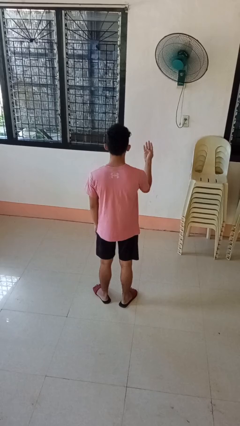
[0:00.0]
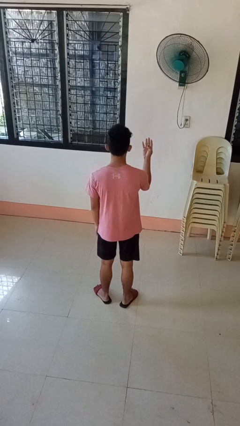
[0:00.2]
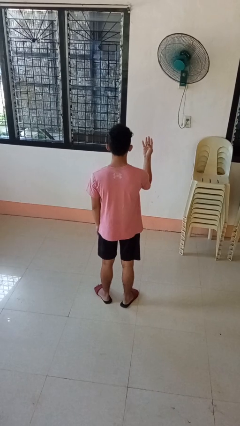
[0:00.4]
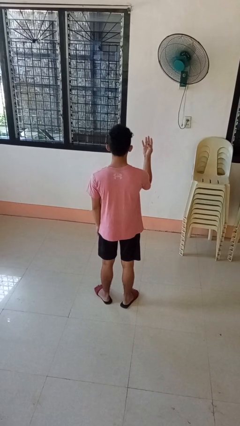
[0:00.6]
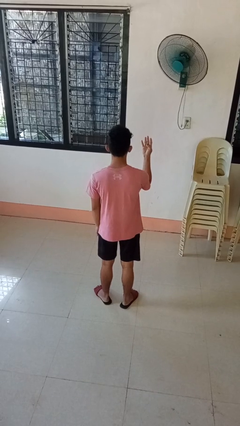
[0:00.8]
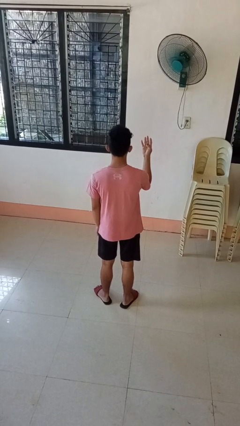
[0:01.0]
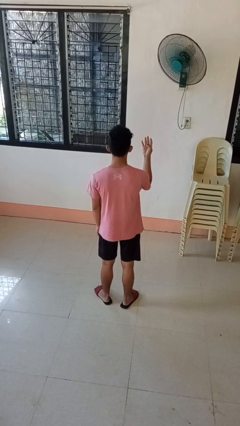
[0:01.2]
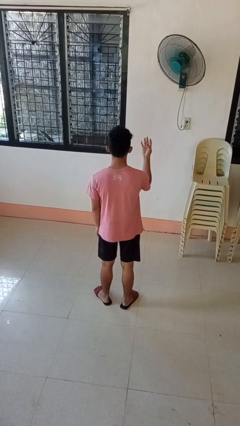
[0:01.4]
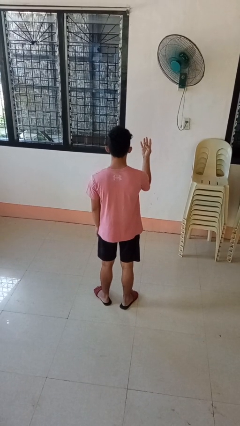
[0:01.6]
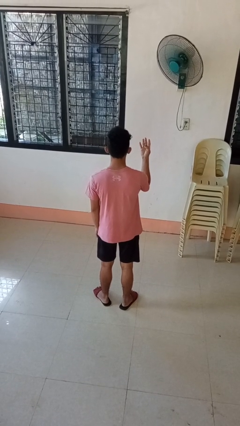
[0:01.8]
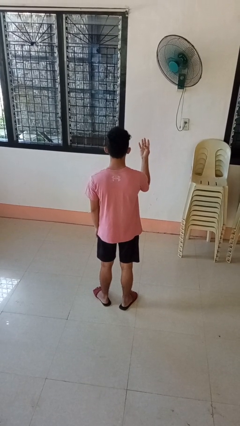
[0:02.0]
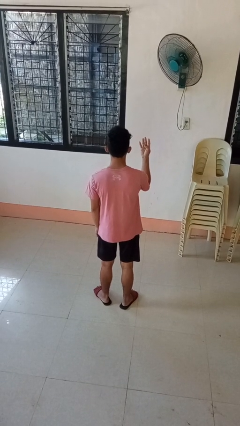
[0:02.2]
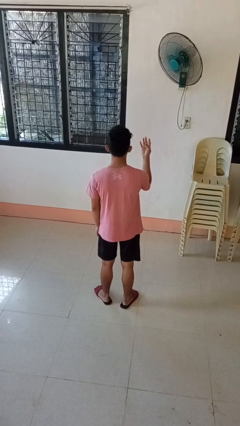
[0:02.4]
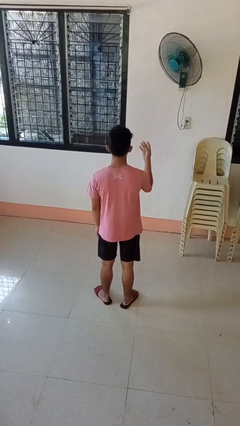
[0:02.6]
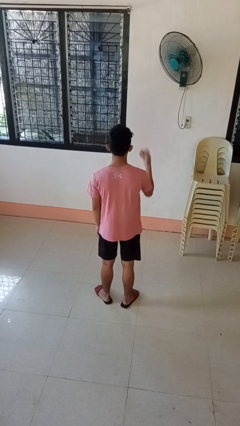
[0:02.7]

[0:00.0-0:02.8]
person gestures number four

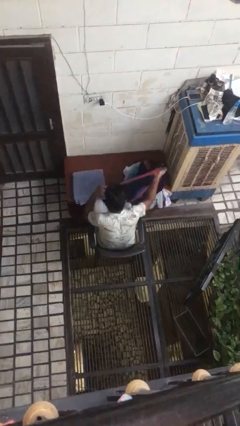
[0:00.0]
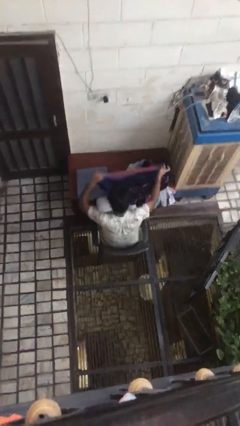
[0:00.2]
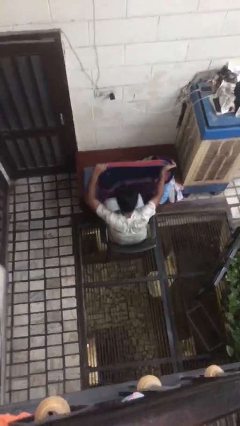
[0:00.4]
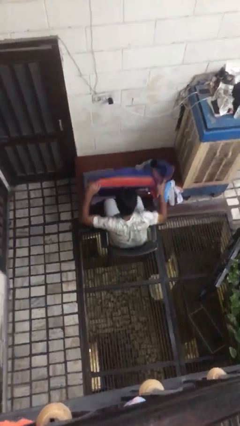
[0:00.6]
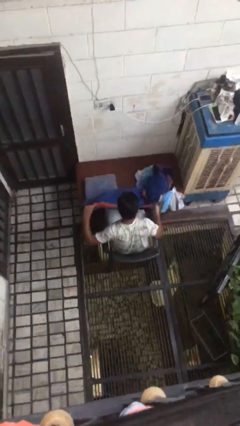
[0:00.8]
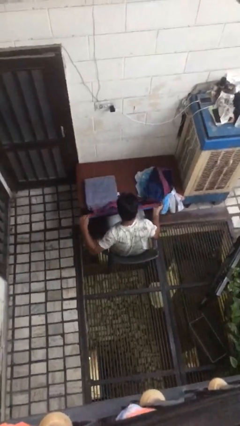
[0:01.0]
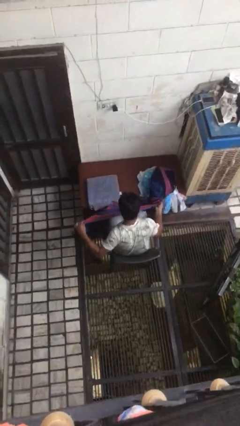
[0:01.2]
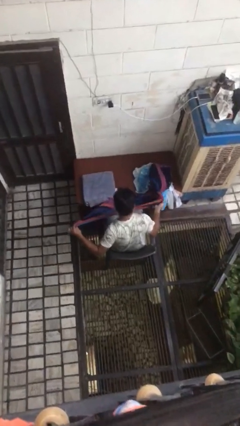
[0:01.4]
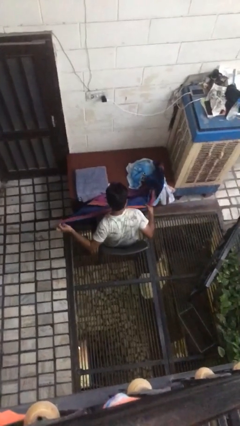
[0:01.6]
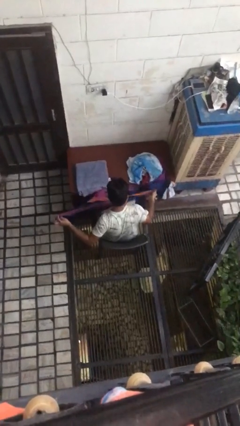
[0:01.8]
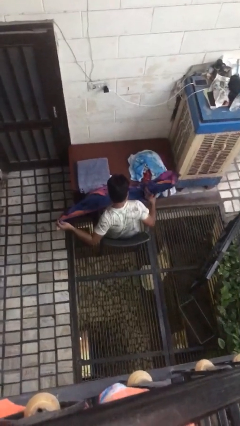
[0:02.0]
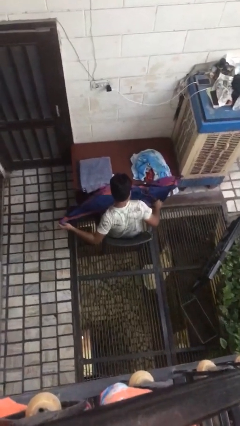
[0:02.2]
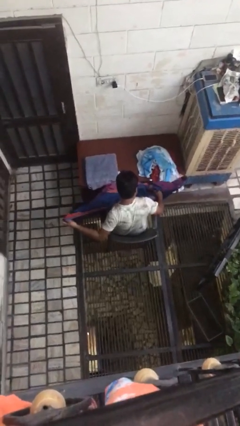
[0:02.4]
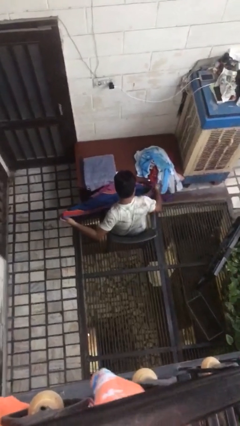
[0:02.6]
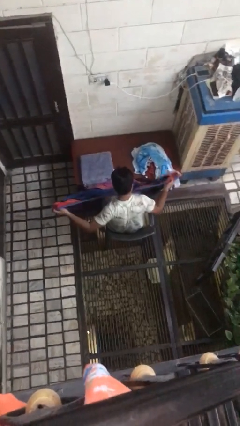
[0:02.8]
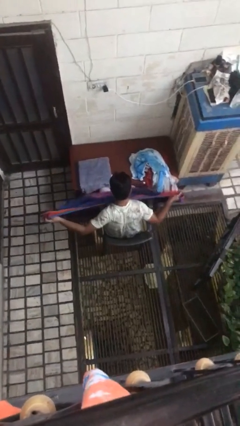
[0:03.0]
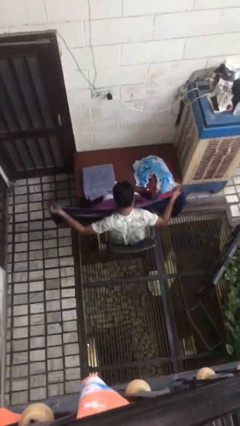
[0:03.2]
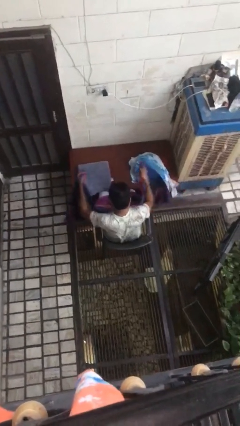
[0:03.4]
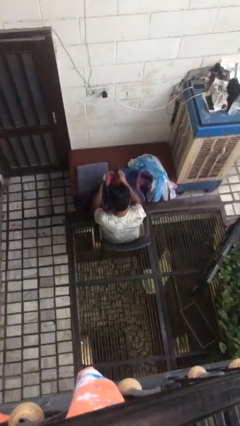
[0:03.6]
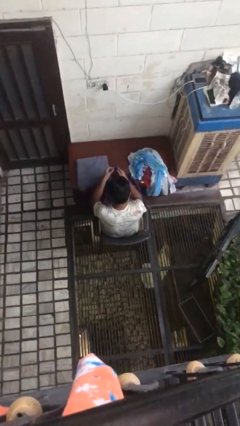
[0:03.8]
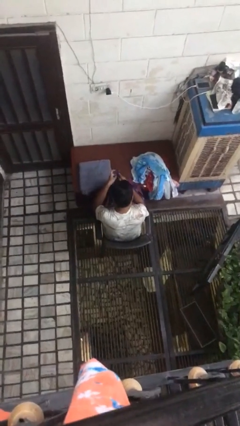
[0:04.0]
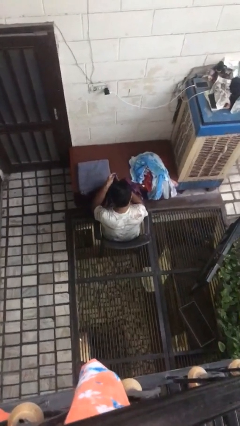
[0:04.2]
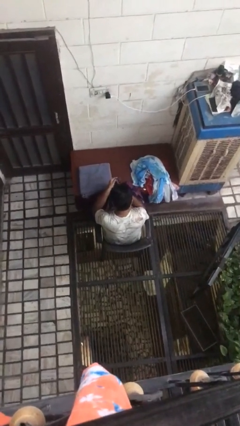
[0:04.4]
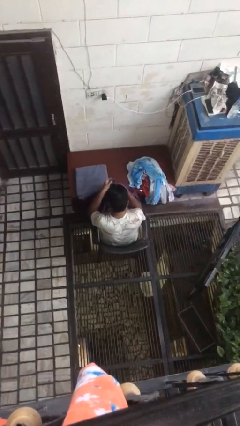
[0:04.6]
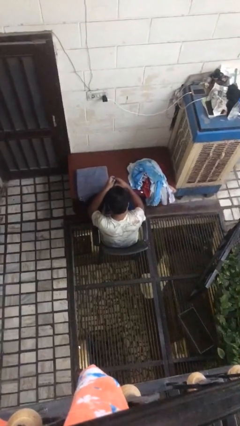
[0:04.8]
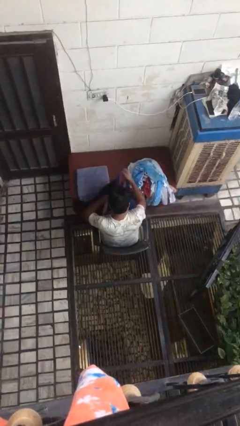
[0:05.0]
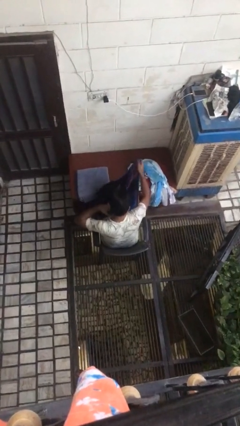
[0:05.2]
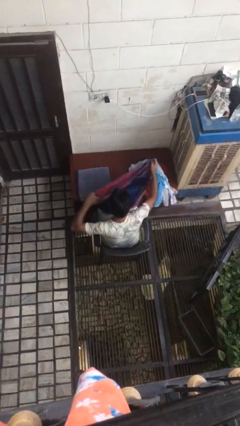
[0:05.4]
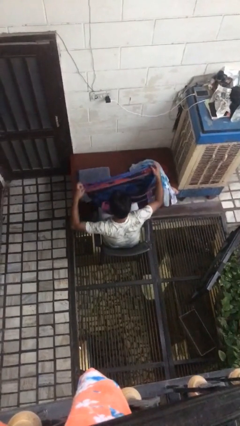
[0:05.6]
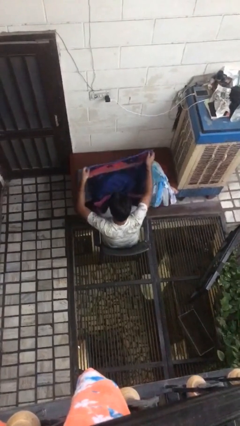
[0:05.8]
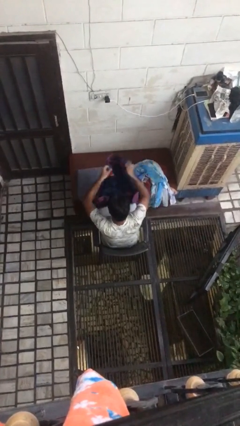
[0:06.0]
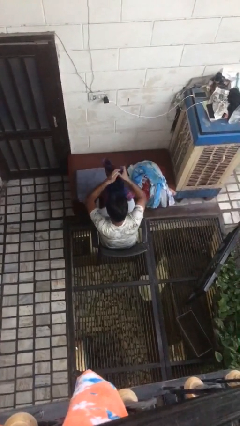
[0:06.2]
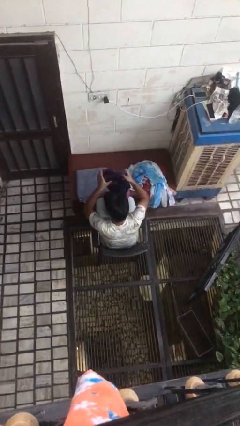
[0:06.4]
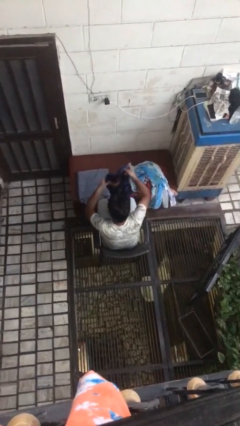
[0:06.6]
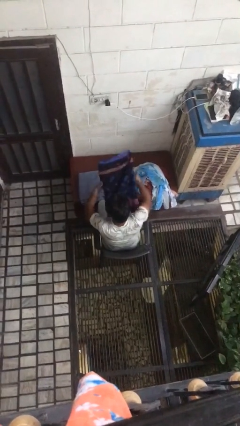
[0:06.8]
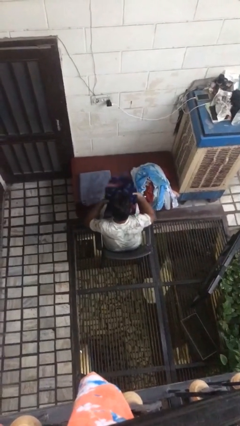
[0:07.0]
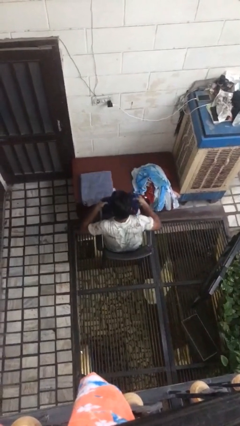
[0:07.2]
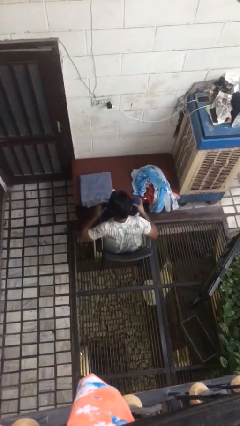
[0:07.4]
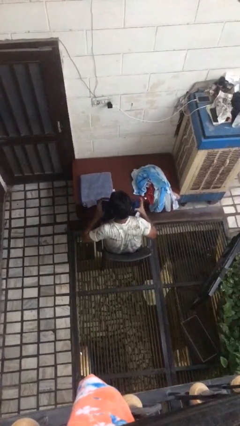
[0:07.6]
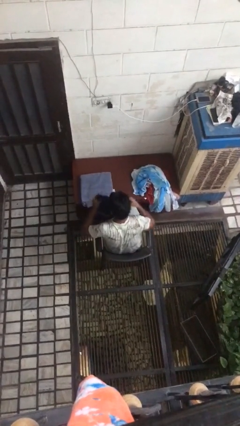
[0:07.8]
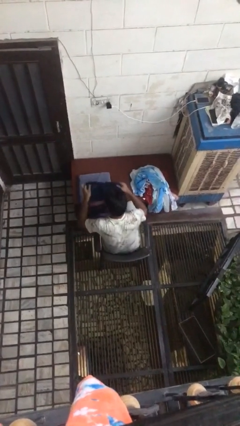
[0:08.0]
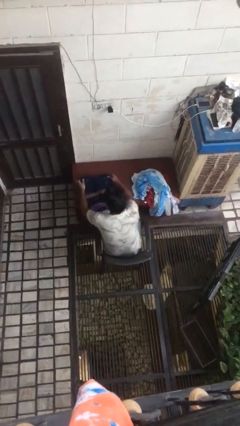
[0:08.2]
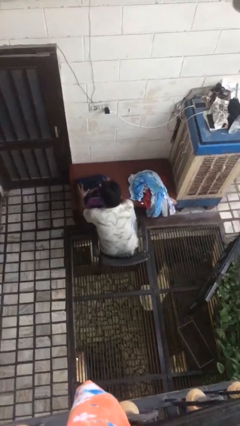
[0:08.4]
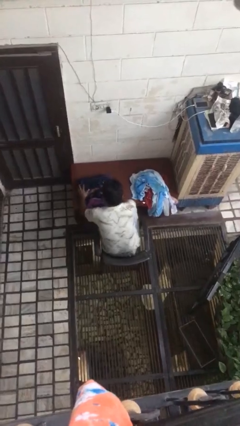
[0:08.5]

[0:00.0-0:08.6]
person folds towel

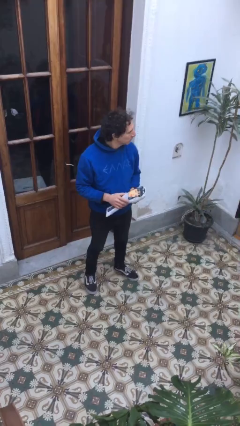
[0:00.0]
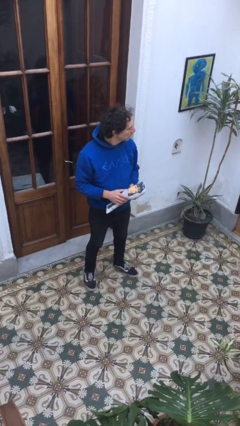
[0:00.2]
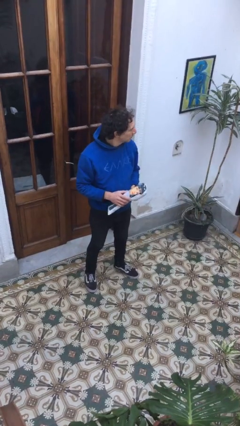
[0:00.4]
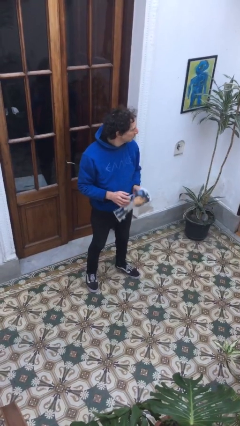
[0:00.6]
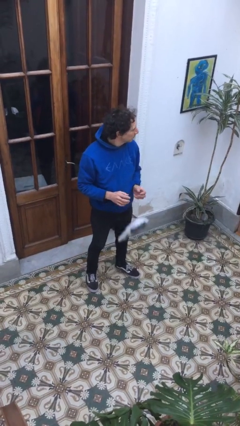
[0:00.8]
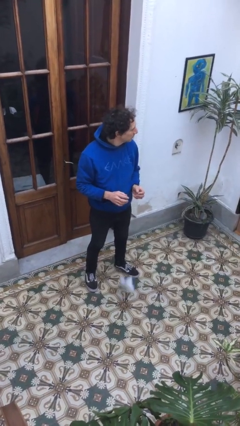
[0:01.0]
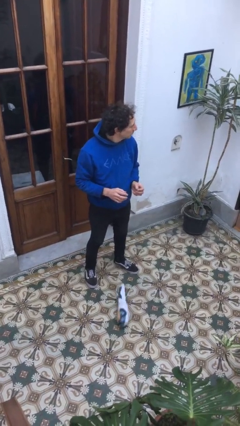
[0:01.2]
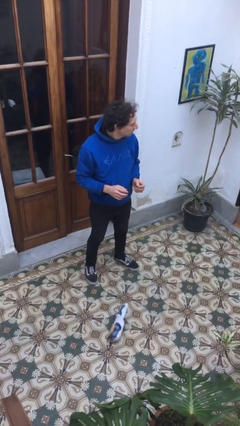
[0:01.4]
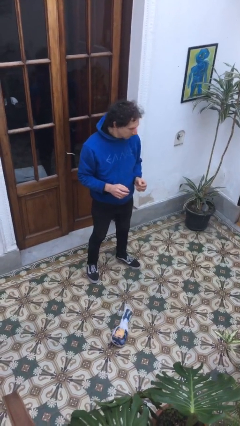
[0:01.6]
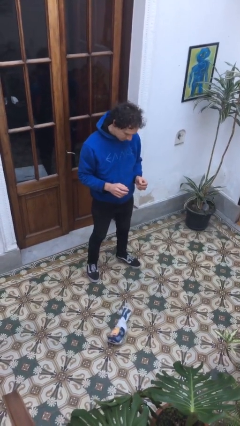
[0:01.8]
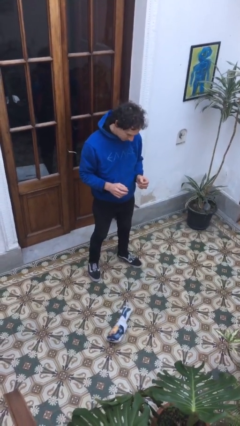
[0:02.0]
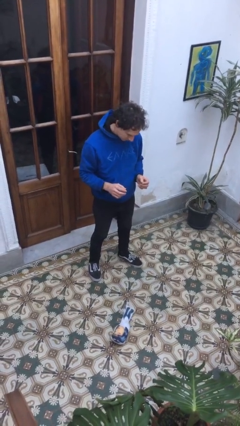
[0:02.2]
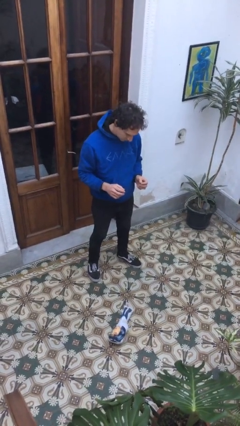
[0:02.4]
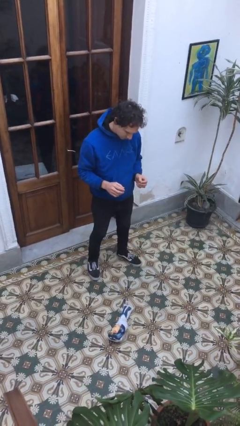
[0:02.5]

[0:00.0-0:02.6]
person drops object

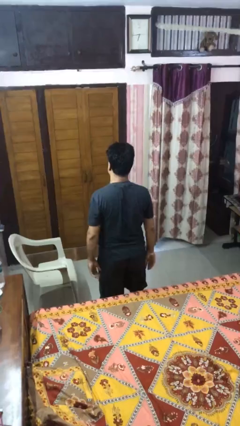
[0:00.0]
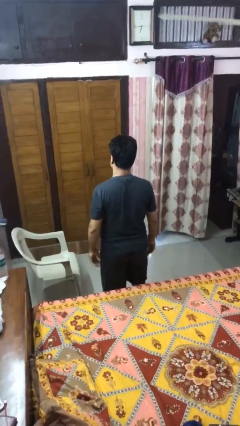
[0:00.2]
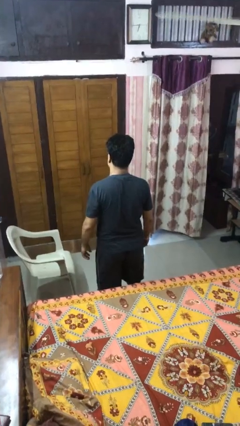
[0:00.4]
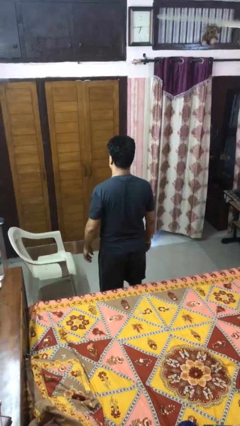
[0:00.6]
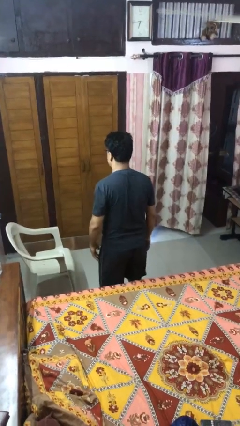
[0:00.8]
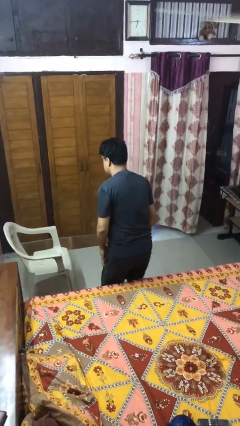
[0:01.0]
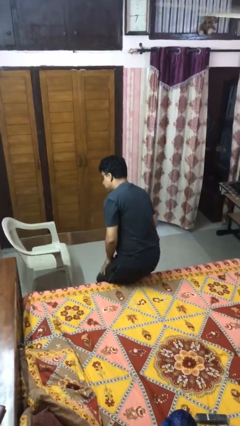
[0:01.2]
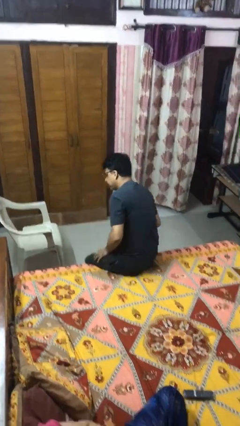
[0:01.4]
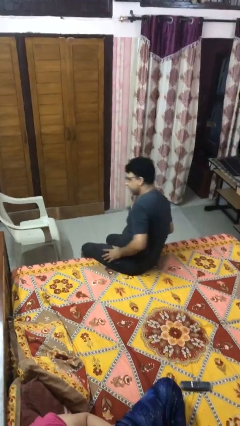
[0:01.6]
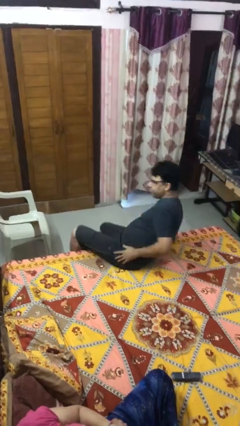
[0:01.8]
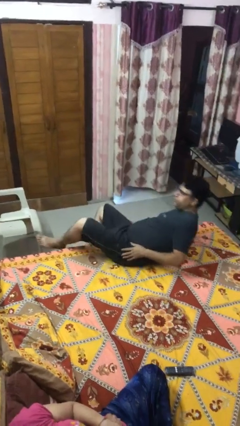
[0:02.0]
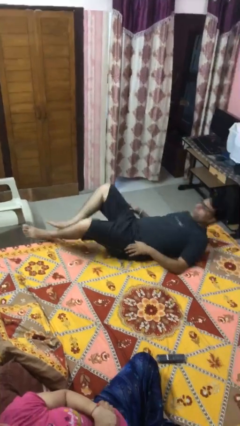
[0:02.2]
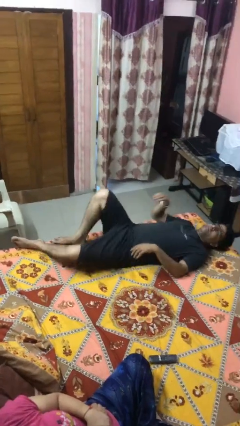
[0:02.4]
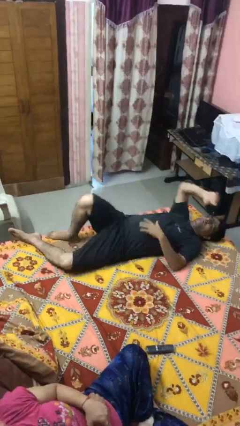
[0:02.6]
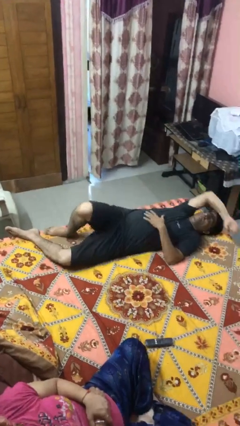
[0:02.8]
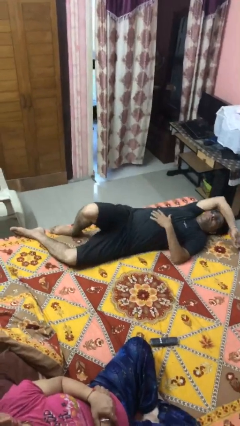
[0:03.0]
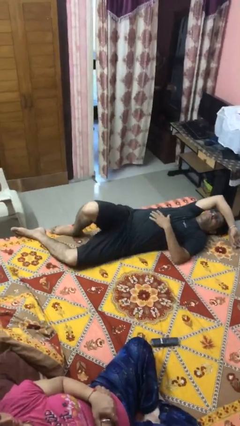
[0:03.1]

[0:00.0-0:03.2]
person lies down on bed

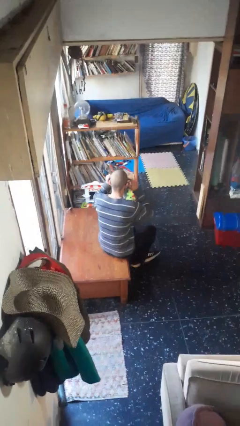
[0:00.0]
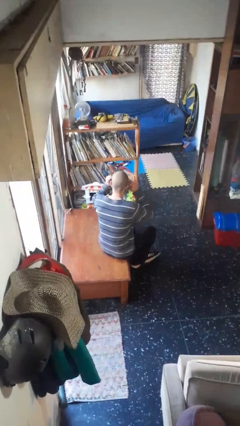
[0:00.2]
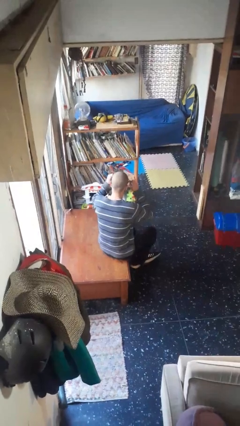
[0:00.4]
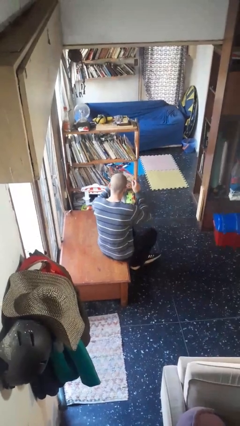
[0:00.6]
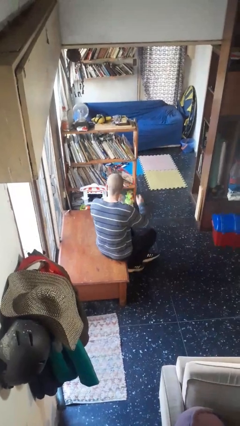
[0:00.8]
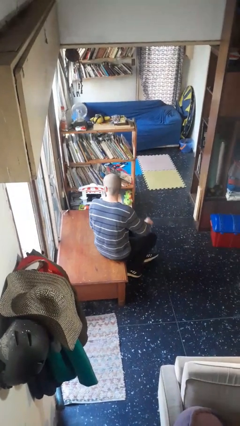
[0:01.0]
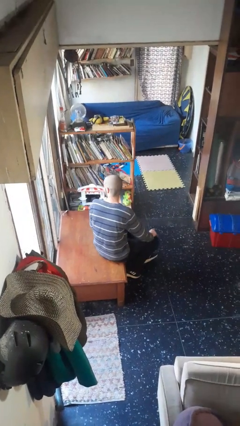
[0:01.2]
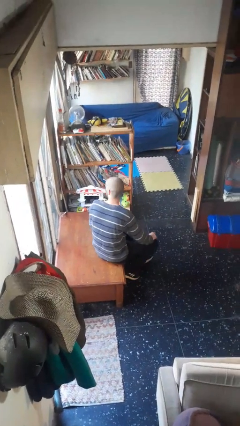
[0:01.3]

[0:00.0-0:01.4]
person takes off glasses
